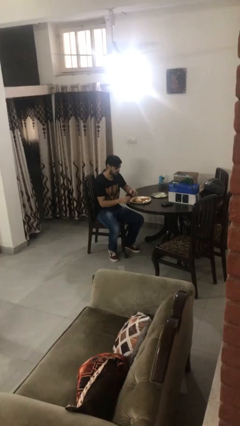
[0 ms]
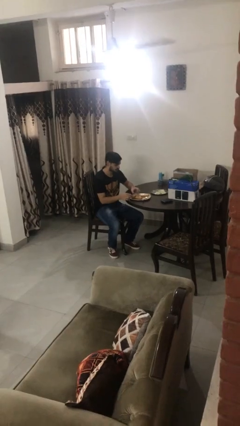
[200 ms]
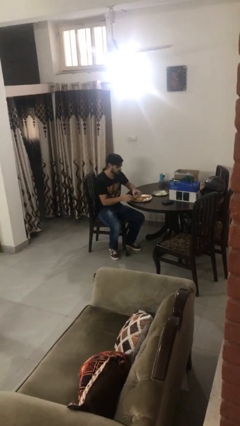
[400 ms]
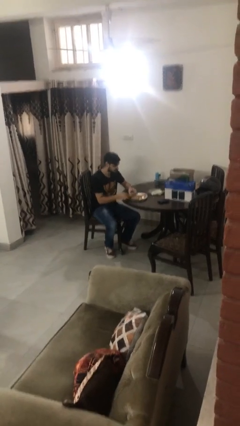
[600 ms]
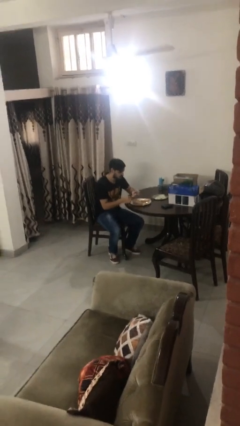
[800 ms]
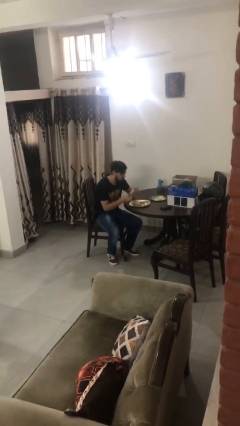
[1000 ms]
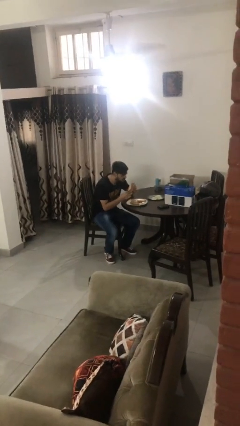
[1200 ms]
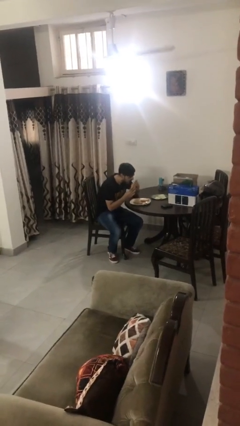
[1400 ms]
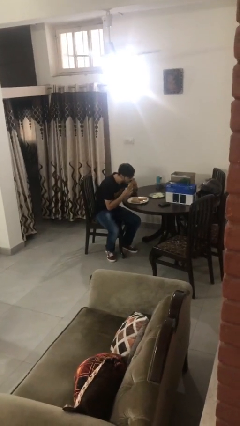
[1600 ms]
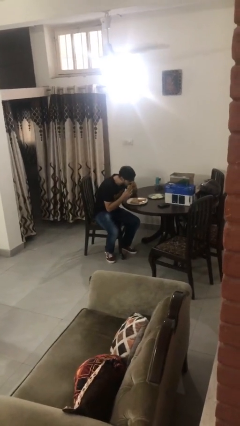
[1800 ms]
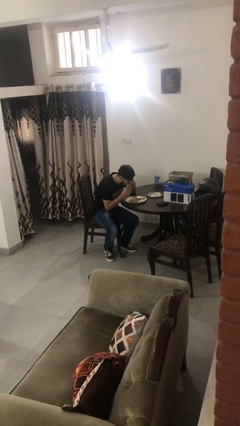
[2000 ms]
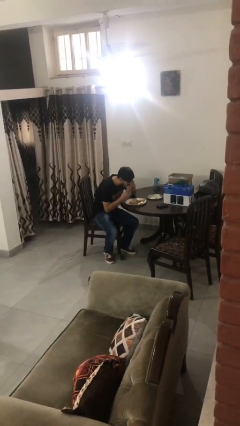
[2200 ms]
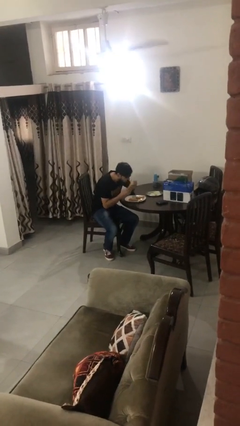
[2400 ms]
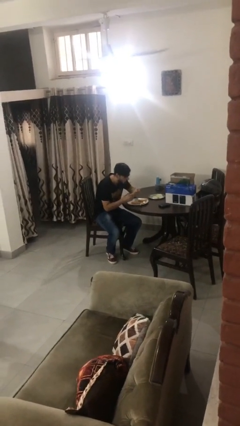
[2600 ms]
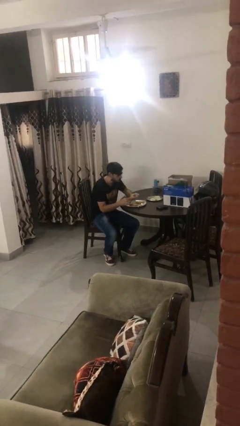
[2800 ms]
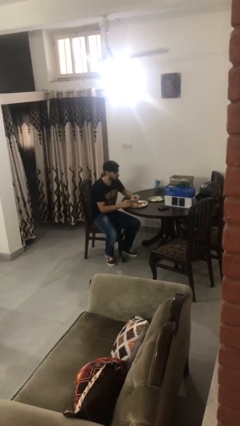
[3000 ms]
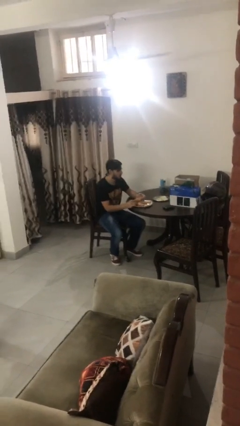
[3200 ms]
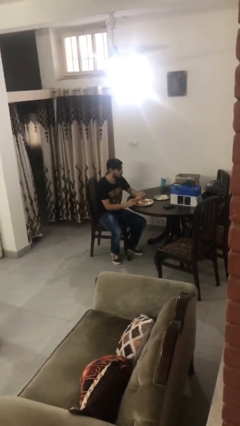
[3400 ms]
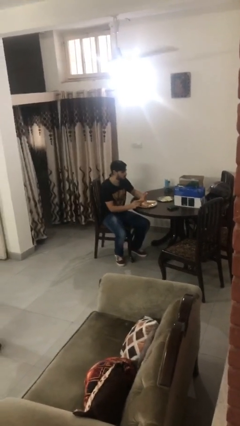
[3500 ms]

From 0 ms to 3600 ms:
person eats with hands

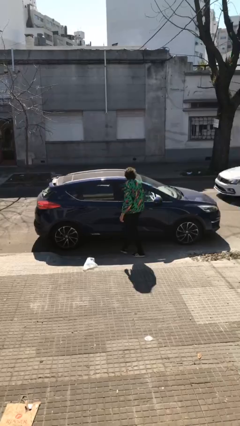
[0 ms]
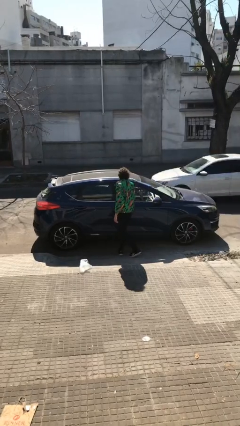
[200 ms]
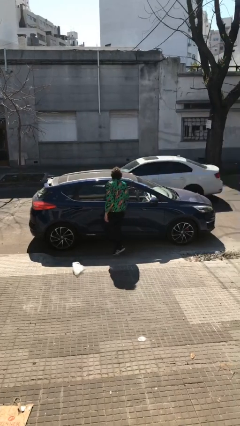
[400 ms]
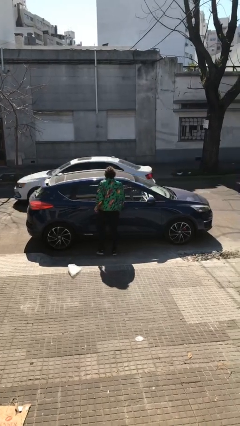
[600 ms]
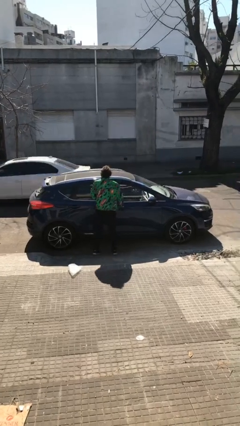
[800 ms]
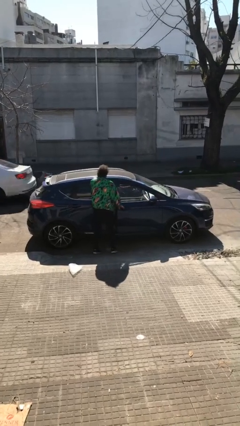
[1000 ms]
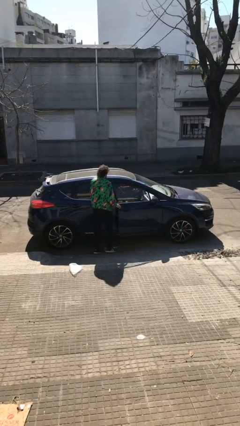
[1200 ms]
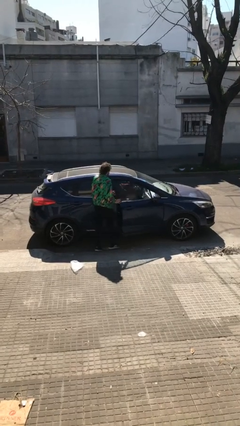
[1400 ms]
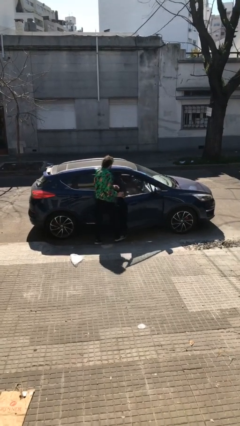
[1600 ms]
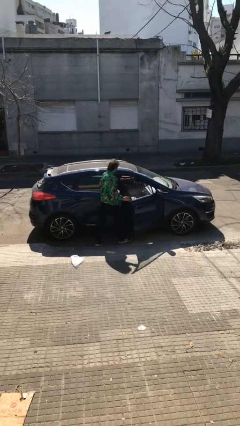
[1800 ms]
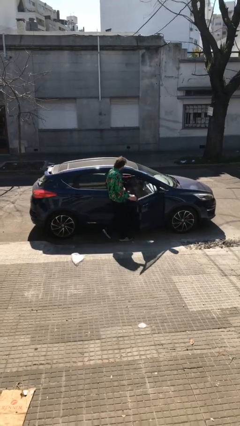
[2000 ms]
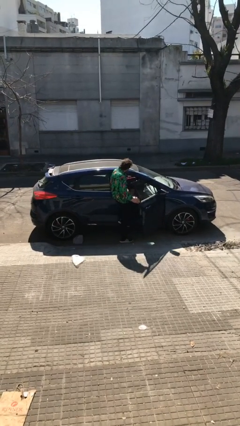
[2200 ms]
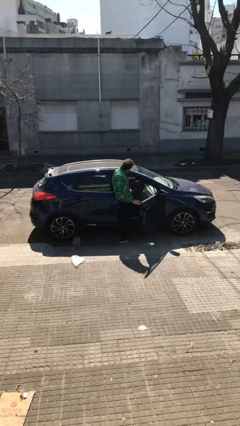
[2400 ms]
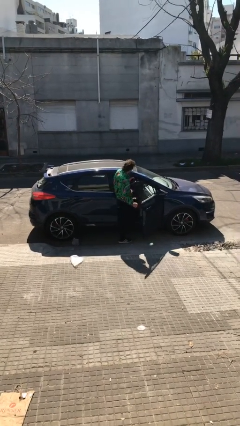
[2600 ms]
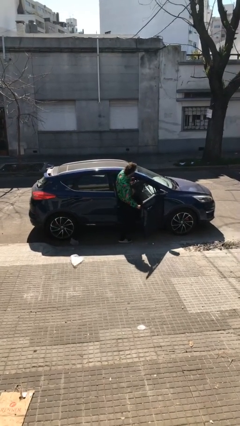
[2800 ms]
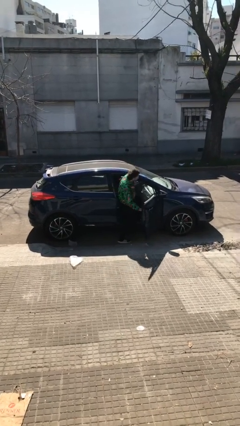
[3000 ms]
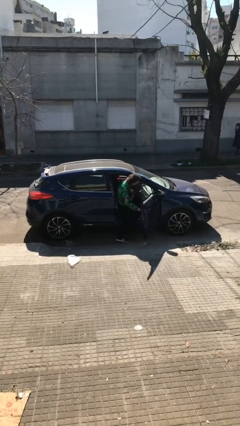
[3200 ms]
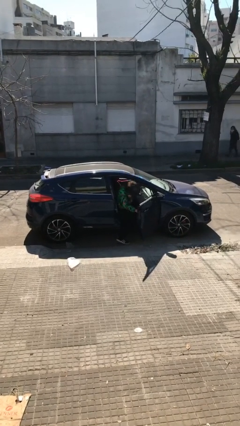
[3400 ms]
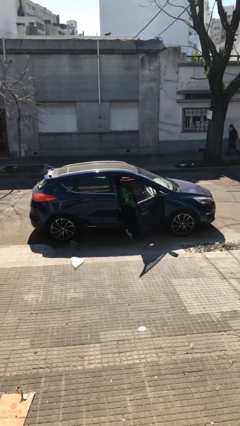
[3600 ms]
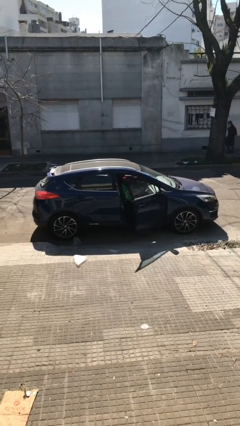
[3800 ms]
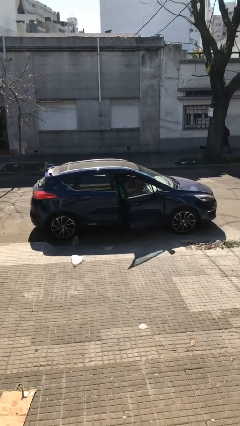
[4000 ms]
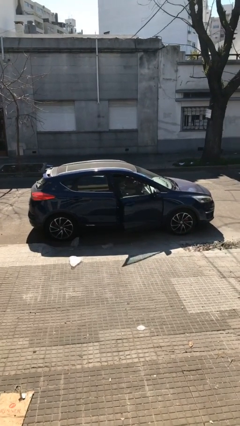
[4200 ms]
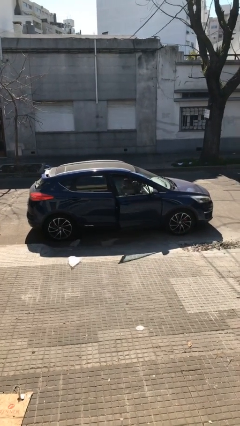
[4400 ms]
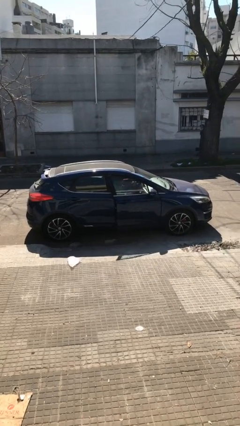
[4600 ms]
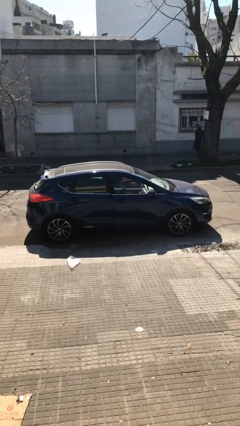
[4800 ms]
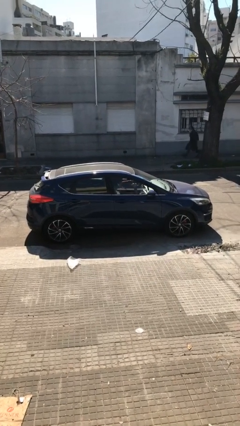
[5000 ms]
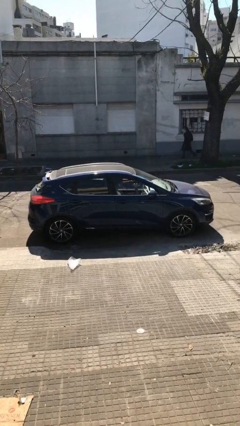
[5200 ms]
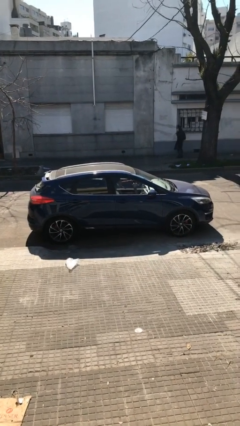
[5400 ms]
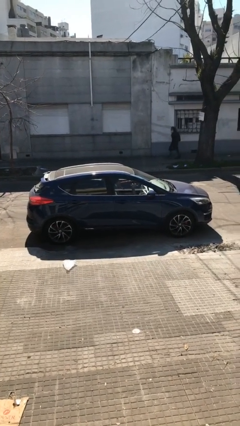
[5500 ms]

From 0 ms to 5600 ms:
car picks up person

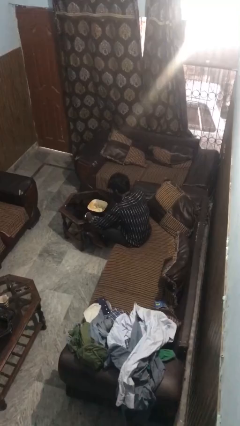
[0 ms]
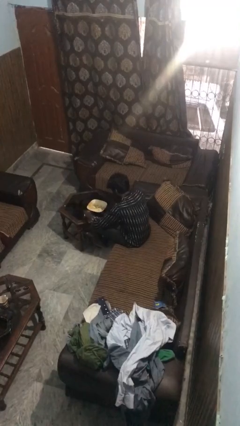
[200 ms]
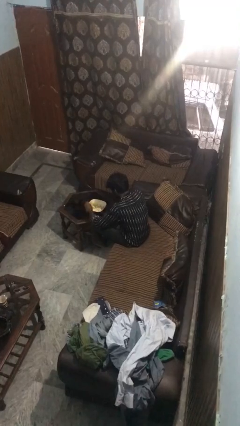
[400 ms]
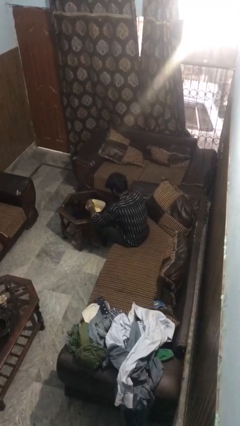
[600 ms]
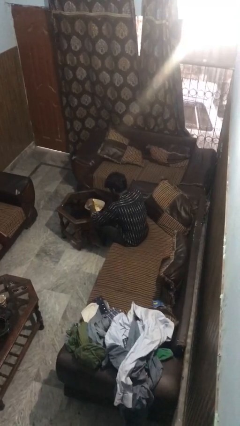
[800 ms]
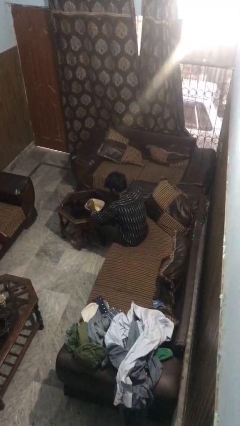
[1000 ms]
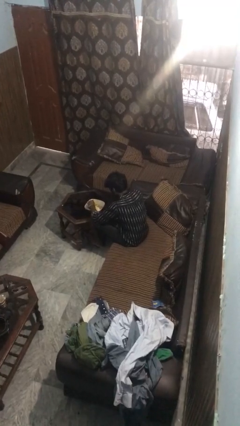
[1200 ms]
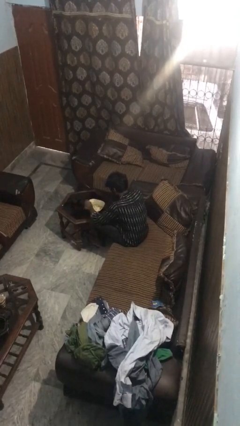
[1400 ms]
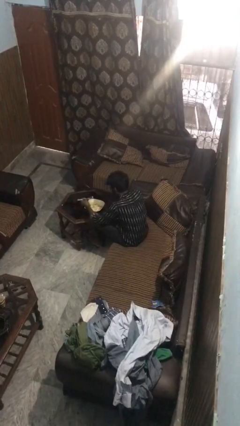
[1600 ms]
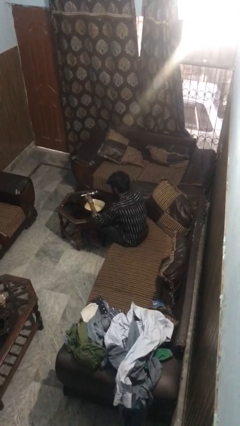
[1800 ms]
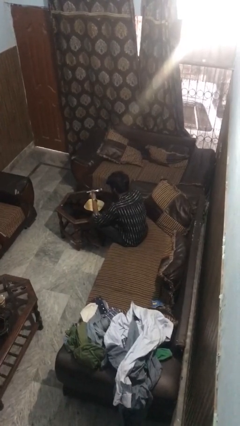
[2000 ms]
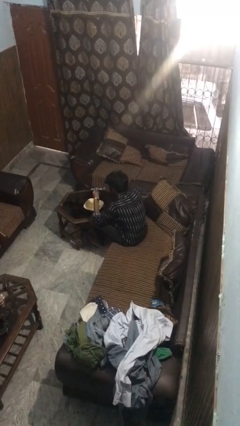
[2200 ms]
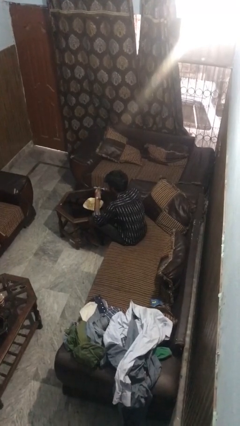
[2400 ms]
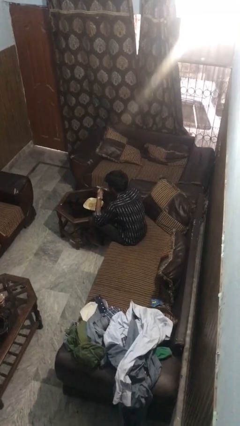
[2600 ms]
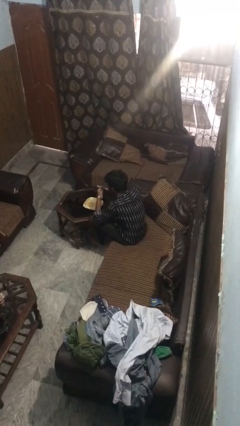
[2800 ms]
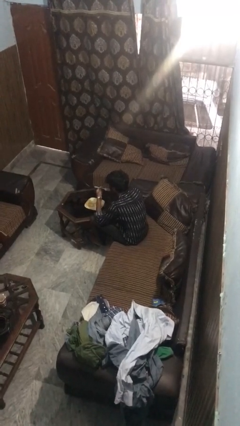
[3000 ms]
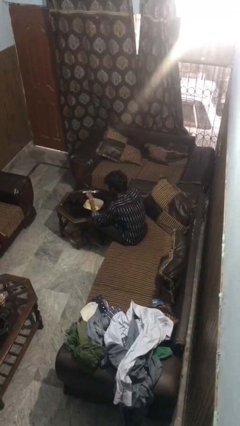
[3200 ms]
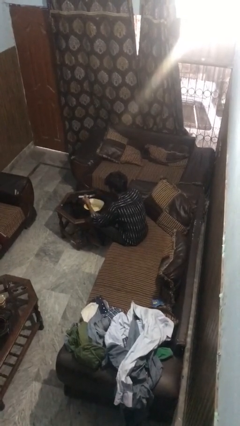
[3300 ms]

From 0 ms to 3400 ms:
person eats with utensil

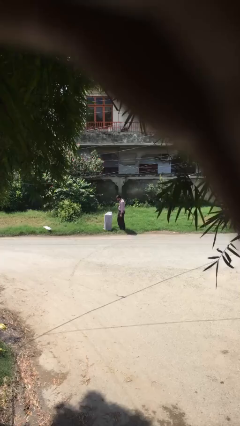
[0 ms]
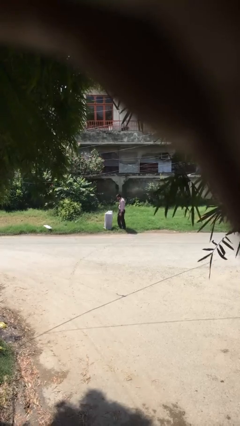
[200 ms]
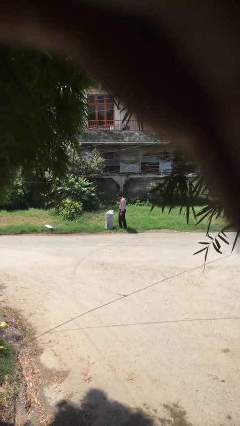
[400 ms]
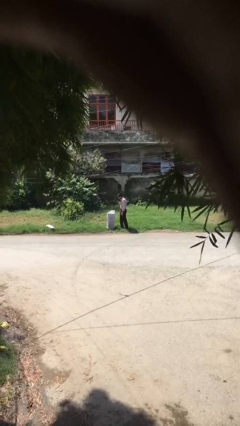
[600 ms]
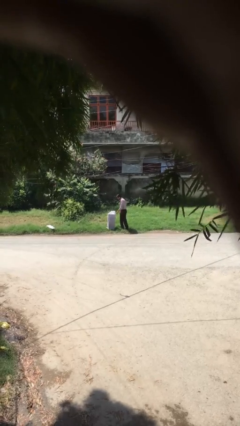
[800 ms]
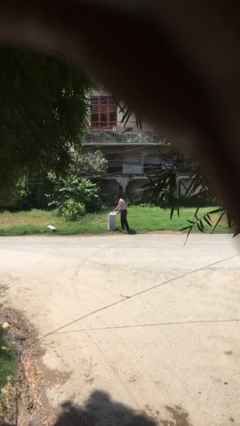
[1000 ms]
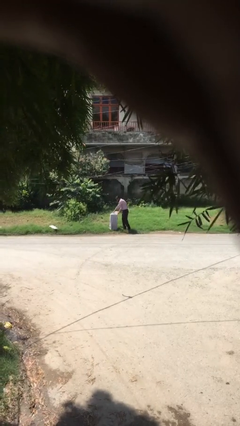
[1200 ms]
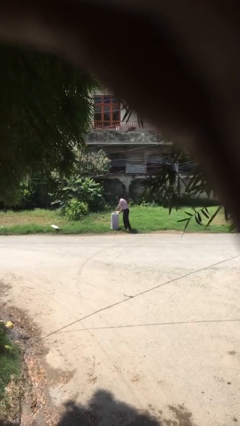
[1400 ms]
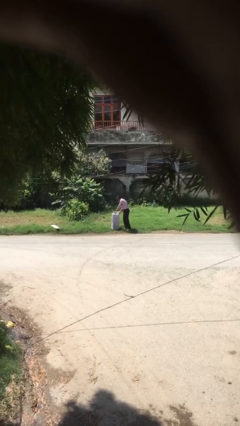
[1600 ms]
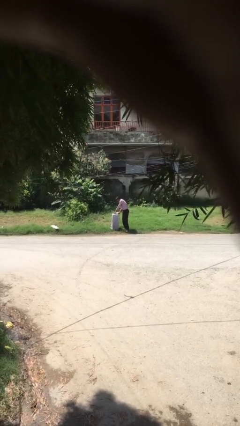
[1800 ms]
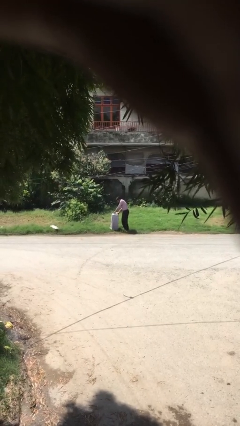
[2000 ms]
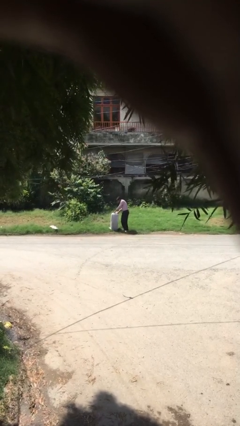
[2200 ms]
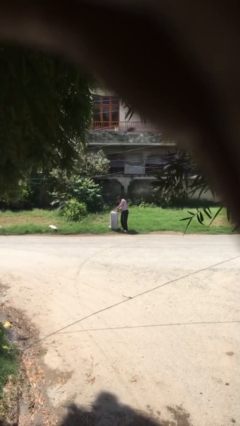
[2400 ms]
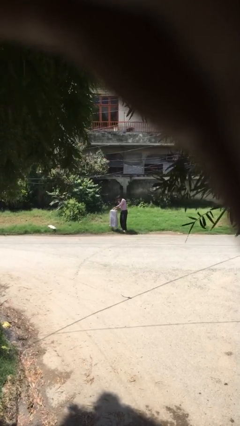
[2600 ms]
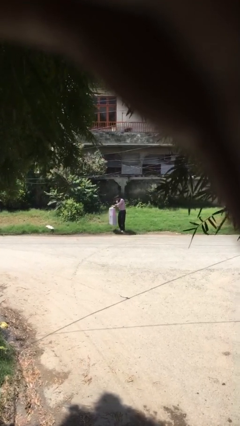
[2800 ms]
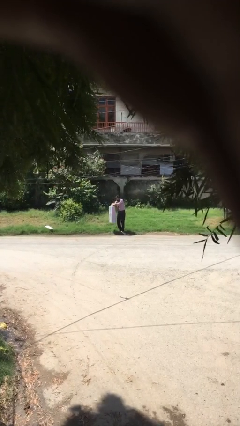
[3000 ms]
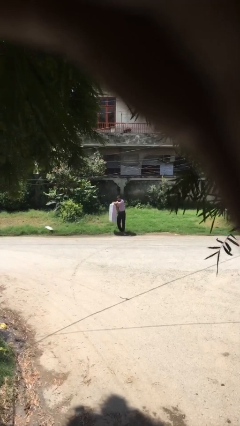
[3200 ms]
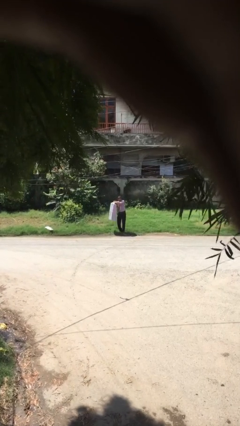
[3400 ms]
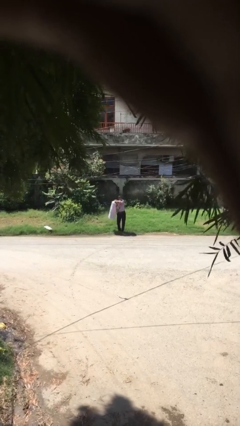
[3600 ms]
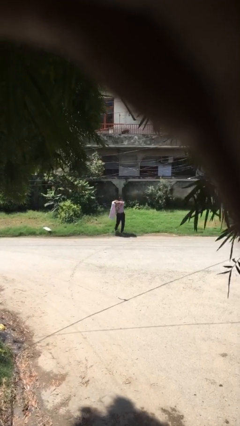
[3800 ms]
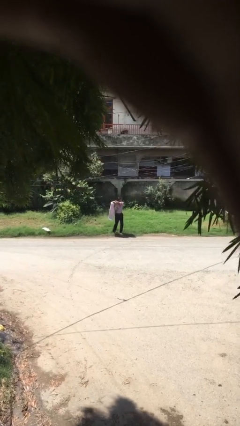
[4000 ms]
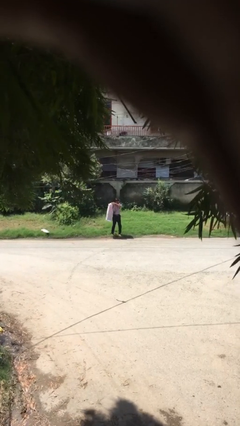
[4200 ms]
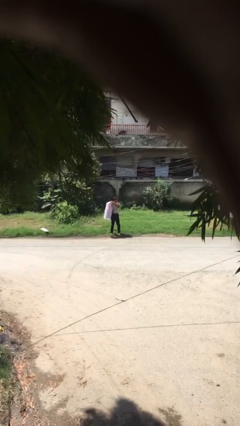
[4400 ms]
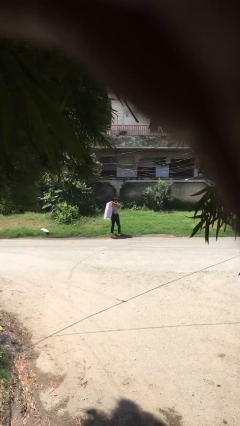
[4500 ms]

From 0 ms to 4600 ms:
person picks up object from floor

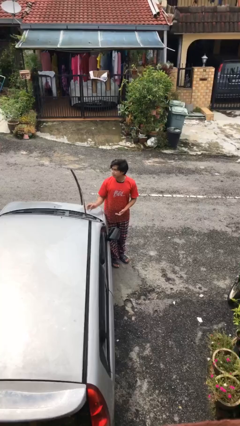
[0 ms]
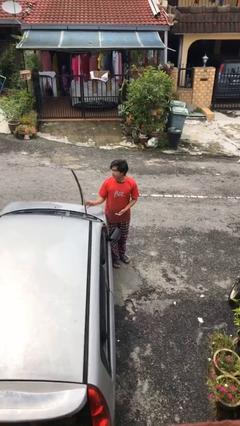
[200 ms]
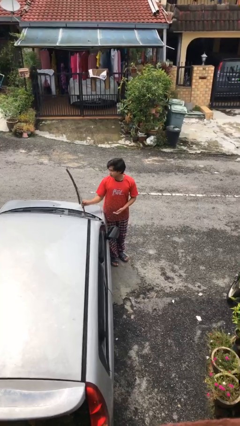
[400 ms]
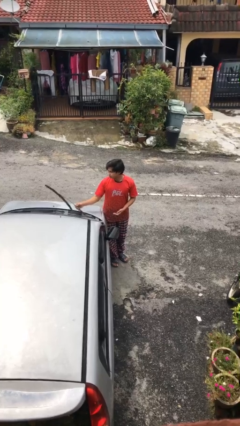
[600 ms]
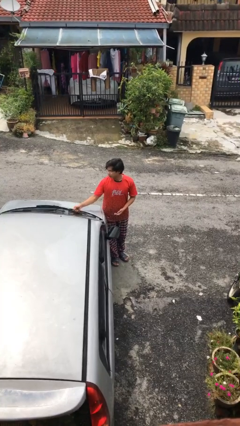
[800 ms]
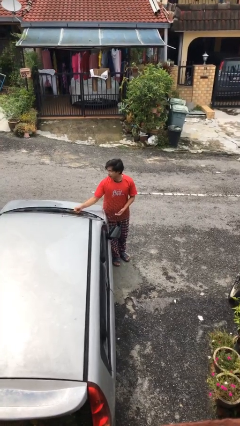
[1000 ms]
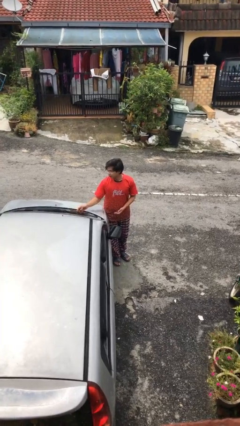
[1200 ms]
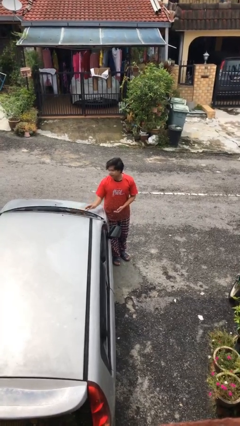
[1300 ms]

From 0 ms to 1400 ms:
person flips down car wipers
